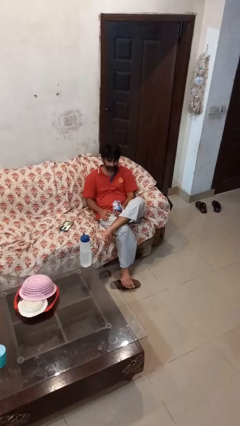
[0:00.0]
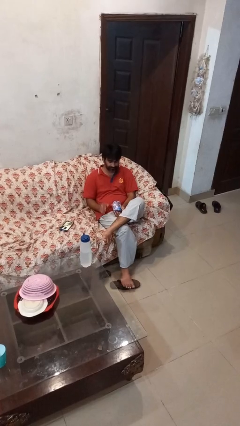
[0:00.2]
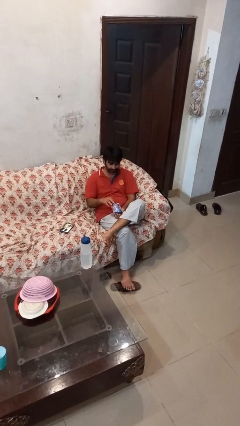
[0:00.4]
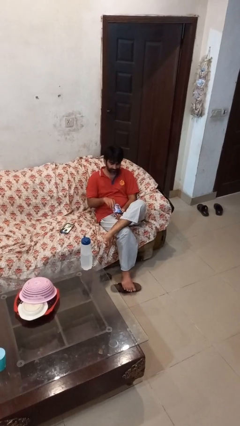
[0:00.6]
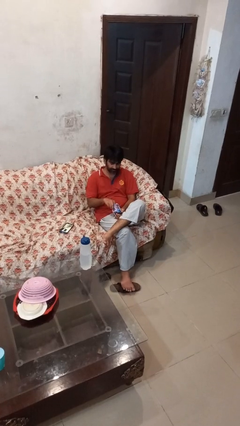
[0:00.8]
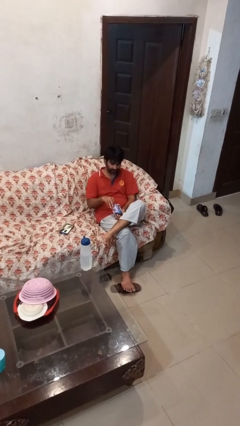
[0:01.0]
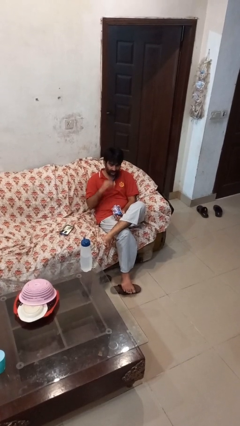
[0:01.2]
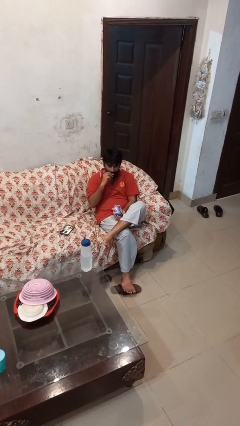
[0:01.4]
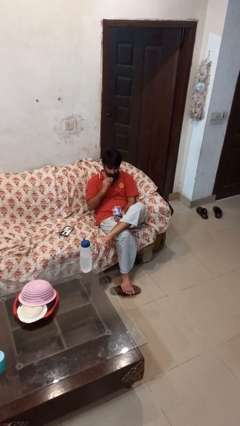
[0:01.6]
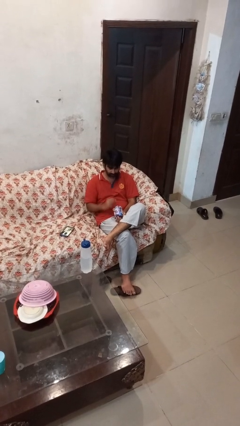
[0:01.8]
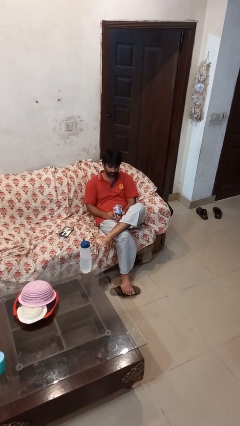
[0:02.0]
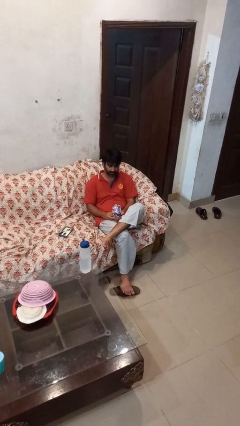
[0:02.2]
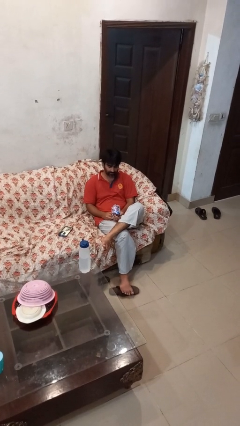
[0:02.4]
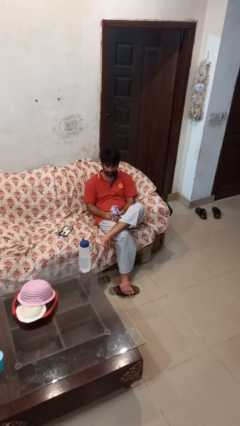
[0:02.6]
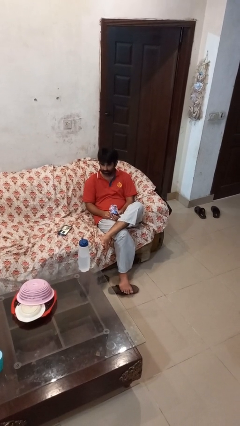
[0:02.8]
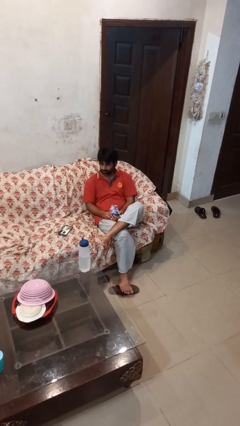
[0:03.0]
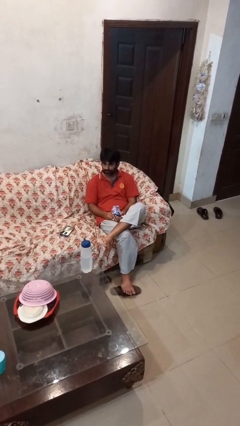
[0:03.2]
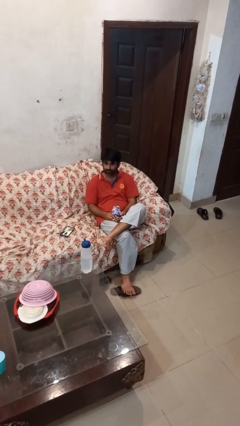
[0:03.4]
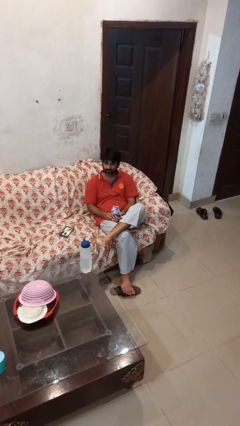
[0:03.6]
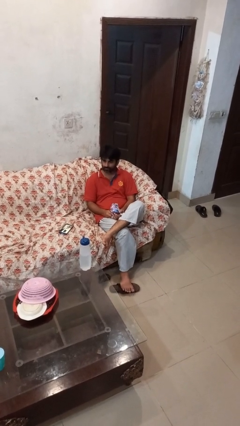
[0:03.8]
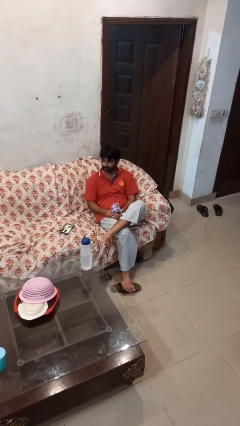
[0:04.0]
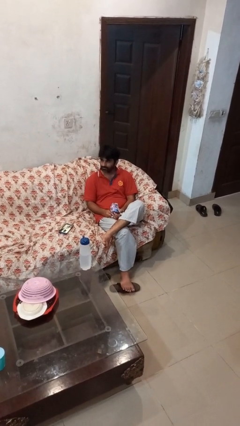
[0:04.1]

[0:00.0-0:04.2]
person eats snack from bag

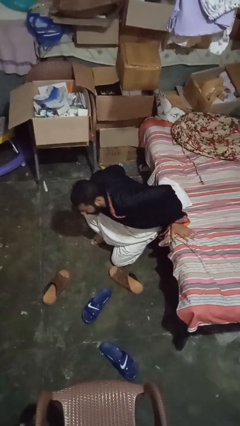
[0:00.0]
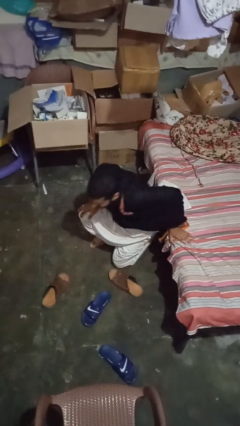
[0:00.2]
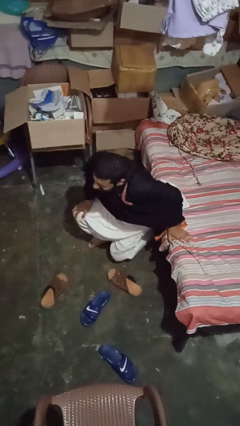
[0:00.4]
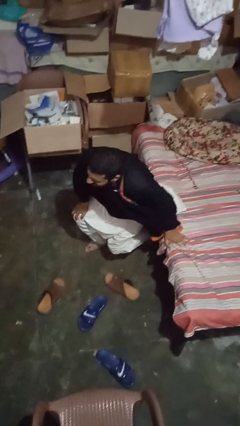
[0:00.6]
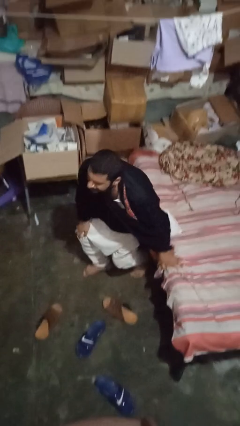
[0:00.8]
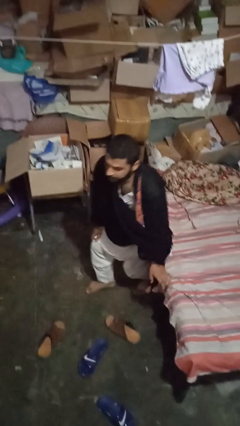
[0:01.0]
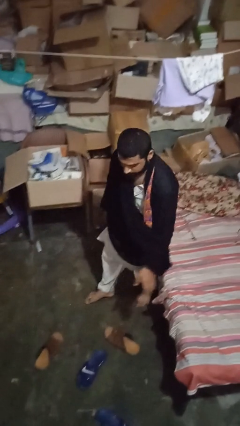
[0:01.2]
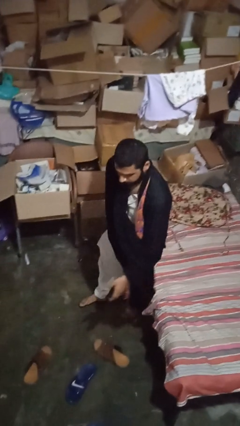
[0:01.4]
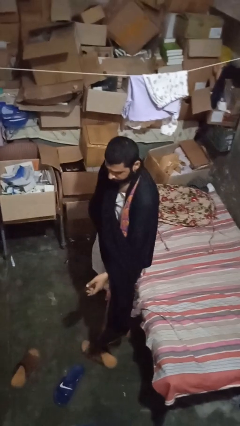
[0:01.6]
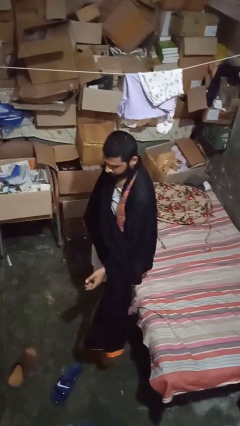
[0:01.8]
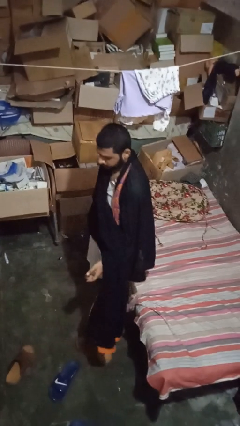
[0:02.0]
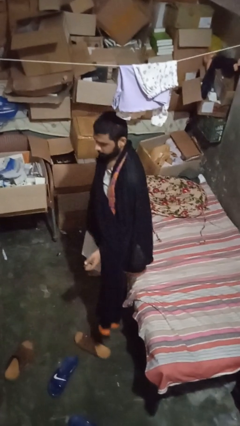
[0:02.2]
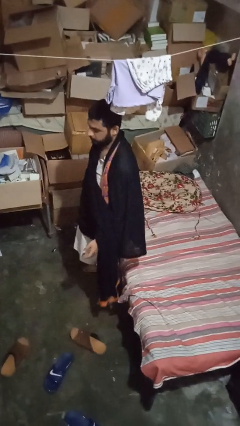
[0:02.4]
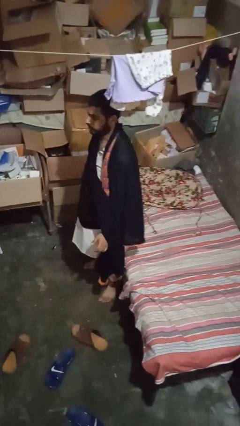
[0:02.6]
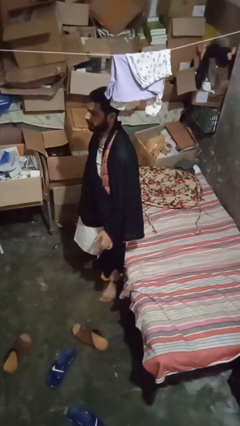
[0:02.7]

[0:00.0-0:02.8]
person stands up from floor

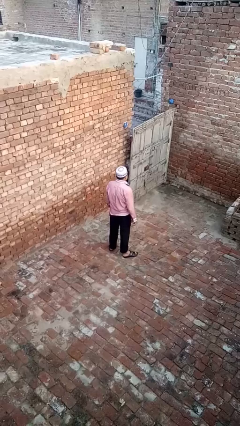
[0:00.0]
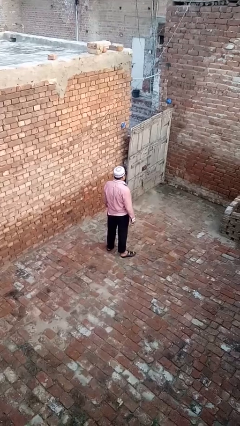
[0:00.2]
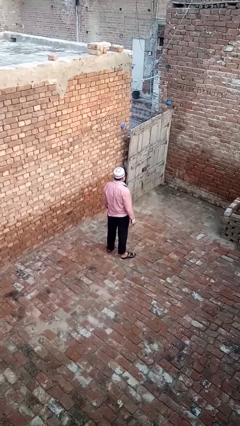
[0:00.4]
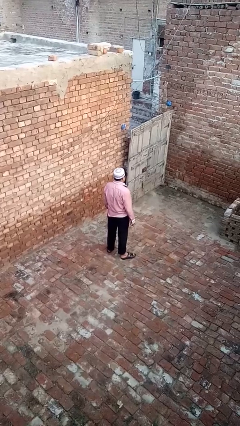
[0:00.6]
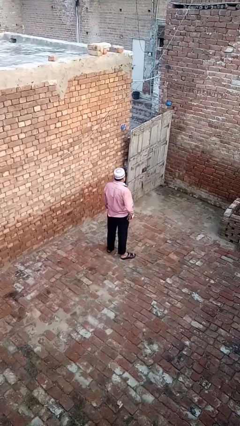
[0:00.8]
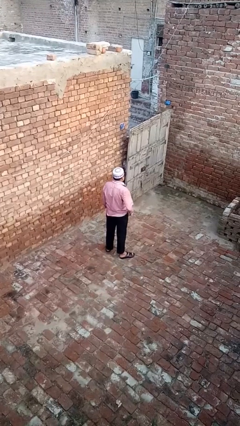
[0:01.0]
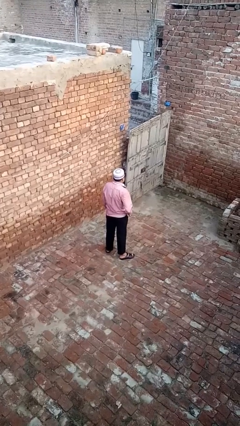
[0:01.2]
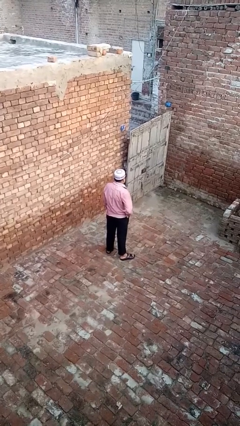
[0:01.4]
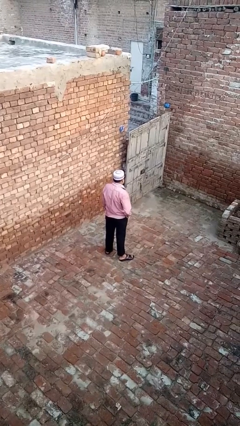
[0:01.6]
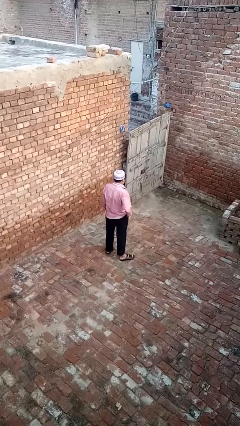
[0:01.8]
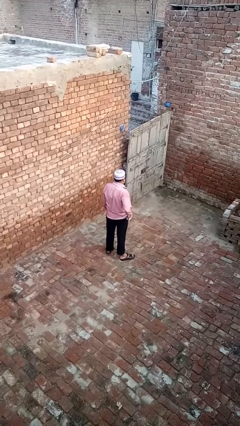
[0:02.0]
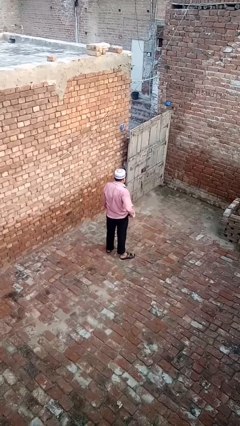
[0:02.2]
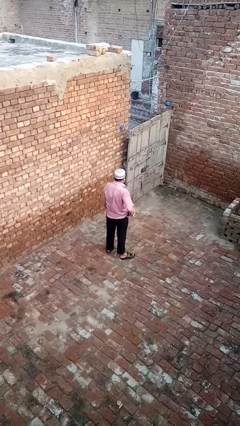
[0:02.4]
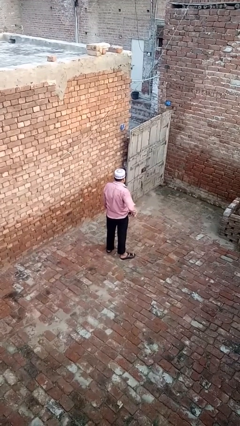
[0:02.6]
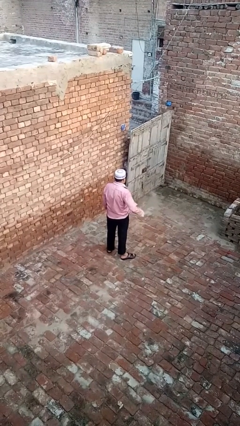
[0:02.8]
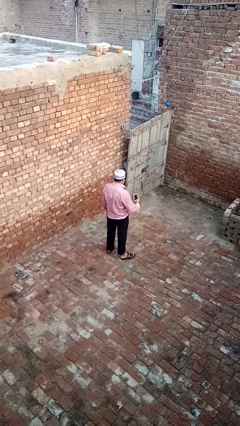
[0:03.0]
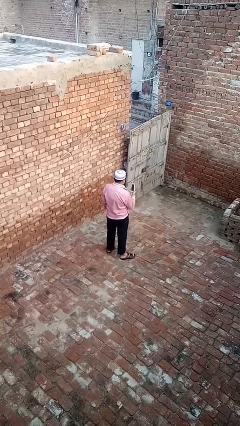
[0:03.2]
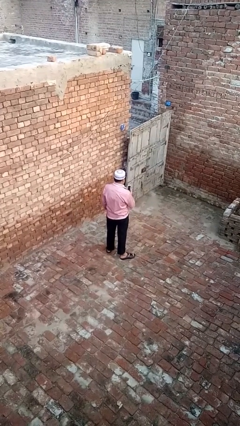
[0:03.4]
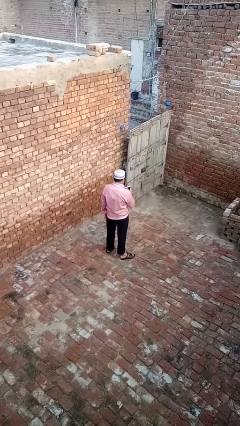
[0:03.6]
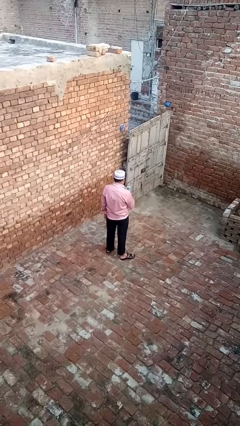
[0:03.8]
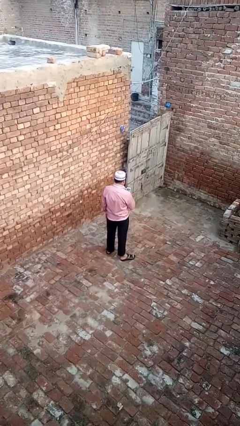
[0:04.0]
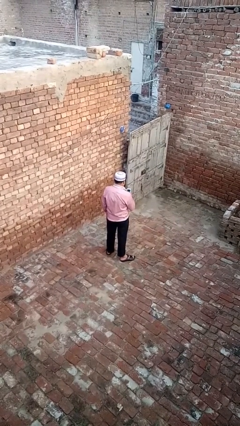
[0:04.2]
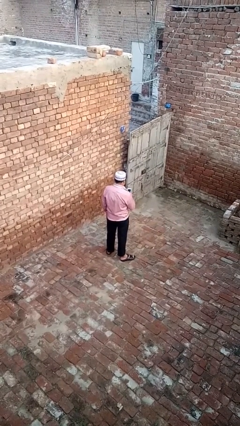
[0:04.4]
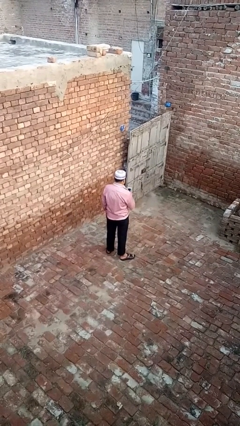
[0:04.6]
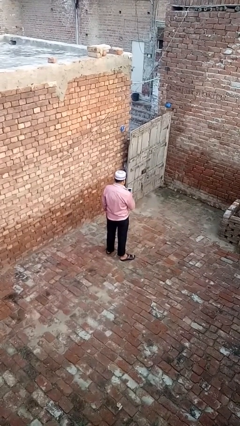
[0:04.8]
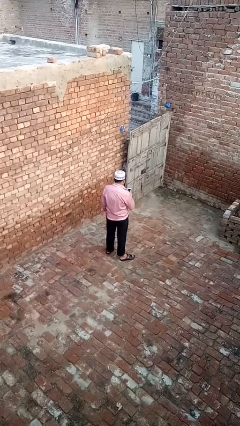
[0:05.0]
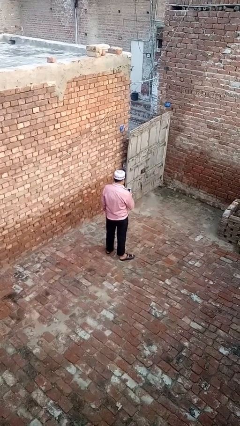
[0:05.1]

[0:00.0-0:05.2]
person takes phone from pocket

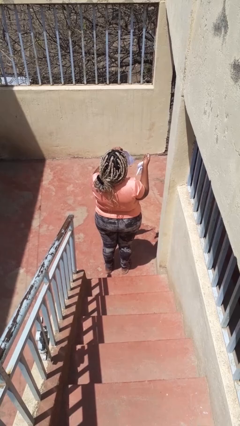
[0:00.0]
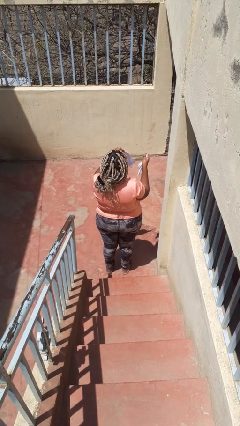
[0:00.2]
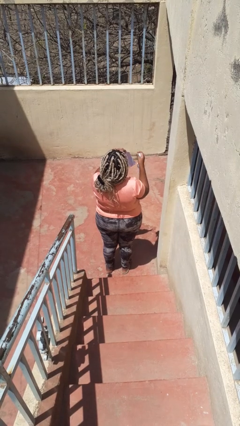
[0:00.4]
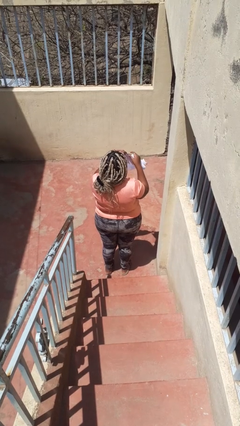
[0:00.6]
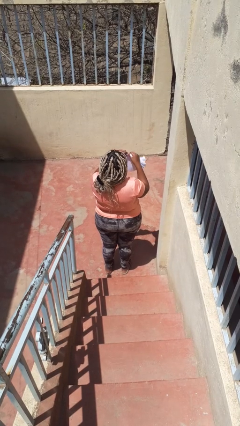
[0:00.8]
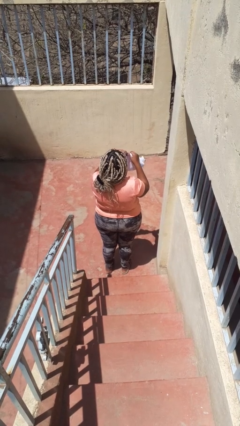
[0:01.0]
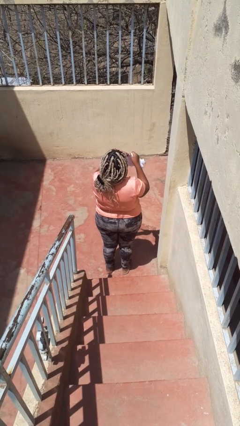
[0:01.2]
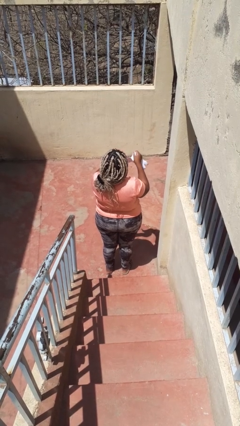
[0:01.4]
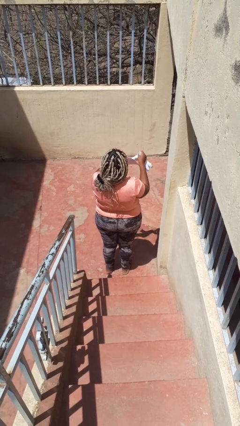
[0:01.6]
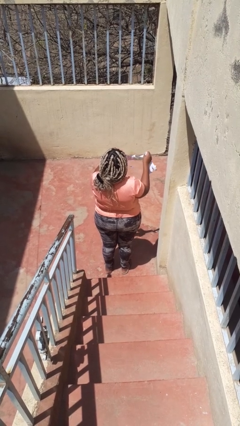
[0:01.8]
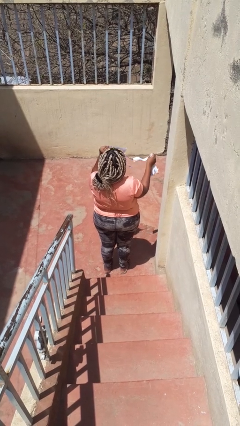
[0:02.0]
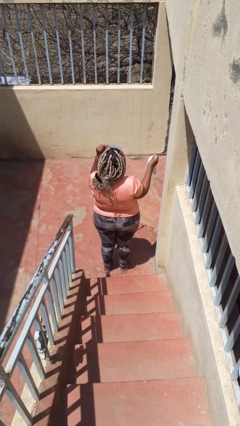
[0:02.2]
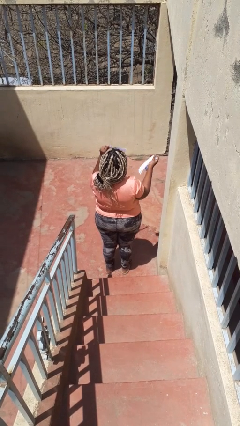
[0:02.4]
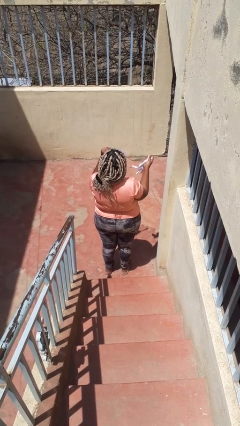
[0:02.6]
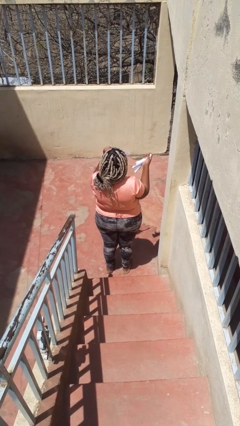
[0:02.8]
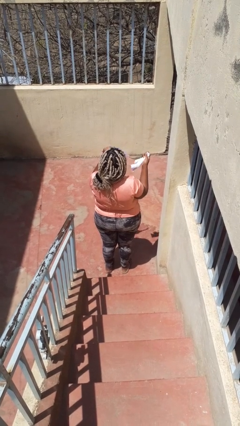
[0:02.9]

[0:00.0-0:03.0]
person tears paper

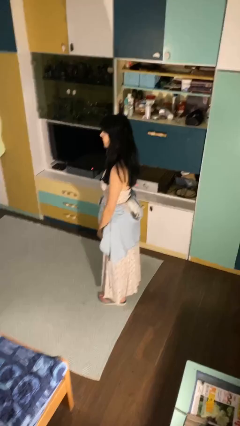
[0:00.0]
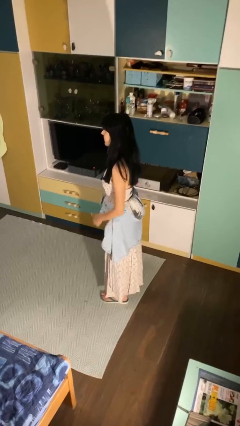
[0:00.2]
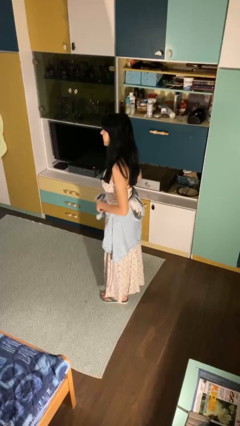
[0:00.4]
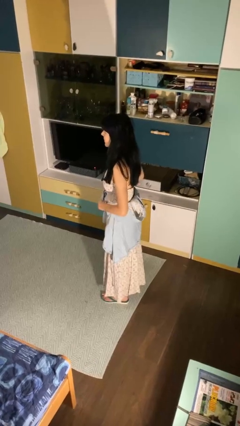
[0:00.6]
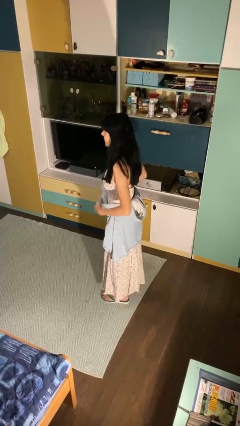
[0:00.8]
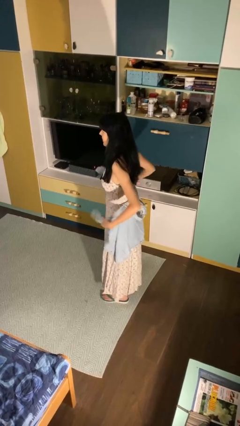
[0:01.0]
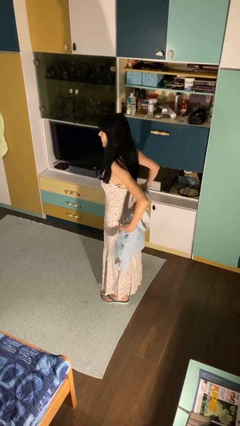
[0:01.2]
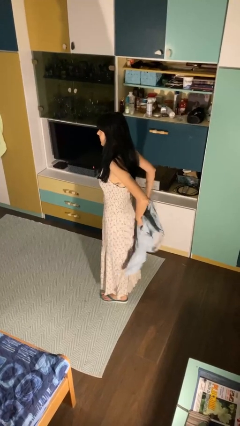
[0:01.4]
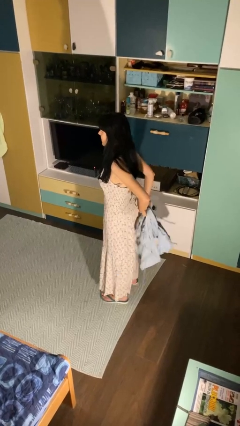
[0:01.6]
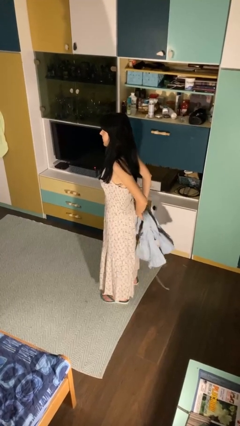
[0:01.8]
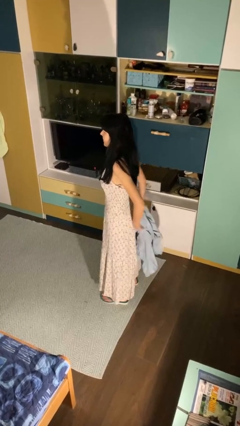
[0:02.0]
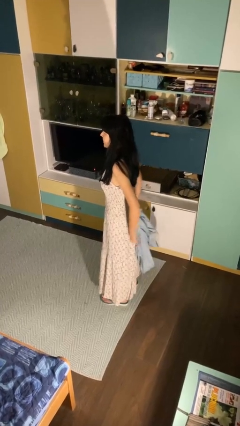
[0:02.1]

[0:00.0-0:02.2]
person unties jacket around waist
